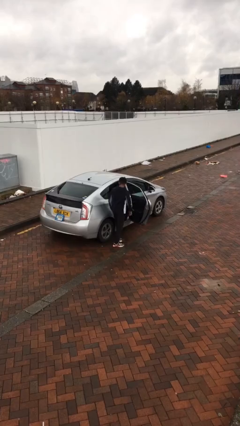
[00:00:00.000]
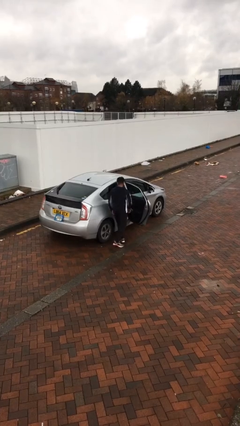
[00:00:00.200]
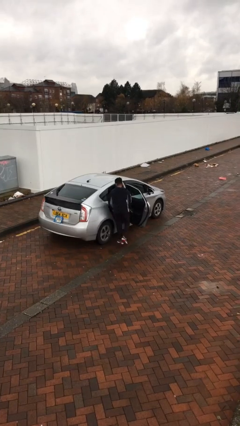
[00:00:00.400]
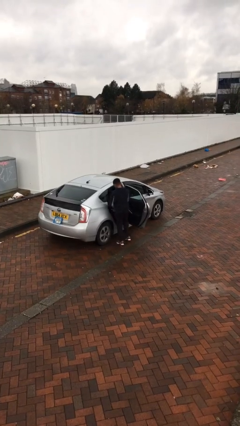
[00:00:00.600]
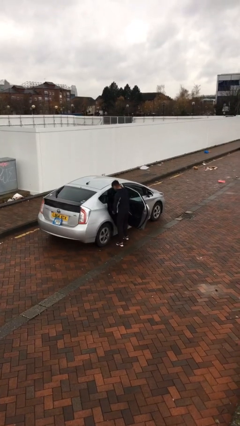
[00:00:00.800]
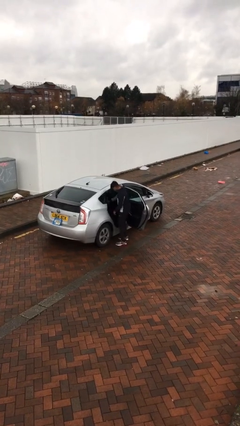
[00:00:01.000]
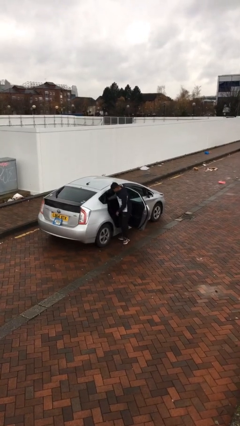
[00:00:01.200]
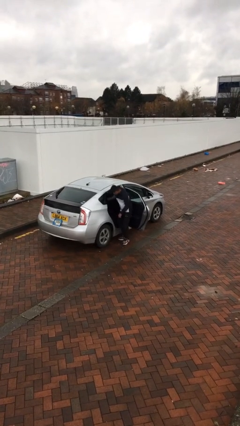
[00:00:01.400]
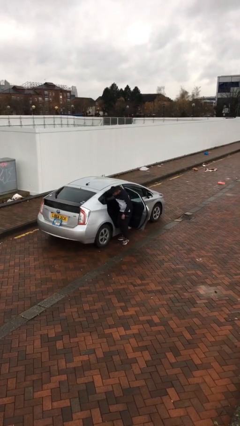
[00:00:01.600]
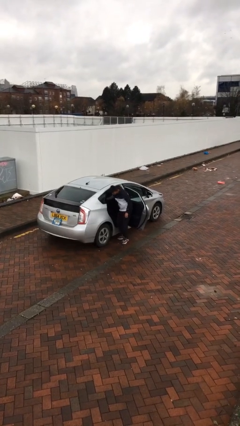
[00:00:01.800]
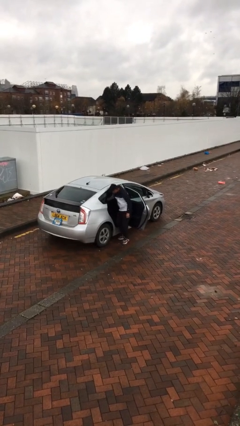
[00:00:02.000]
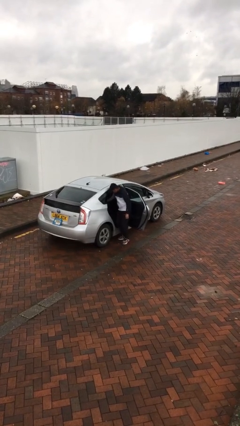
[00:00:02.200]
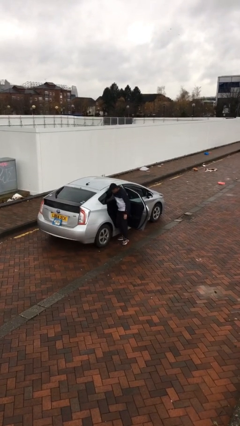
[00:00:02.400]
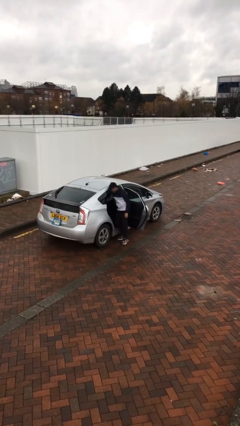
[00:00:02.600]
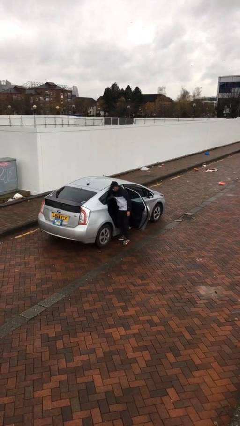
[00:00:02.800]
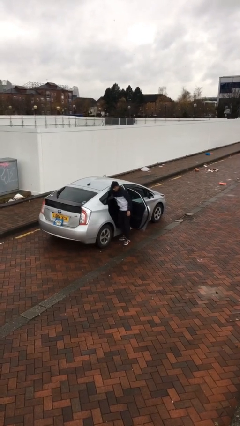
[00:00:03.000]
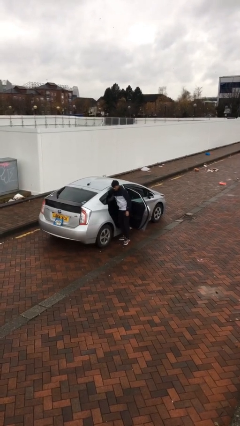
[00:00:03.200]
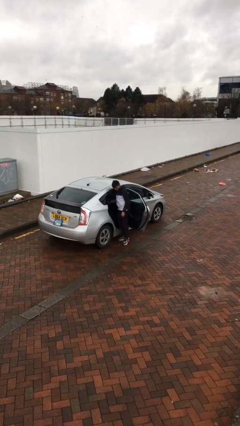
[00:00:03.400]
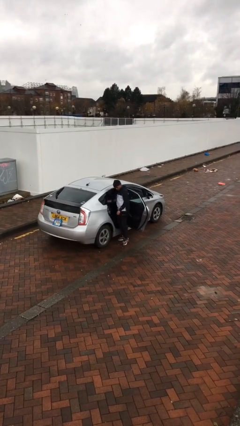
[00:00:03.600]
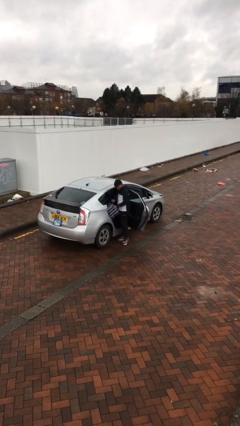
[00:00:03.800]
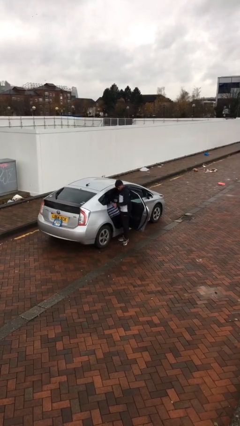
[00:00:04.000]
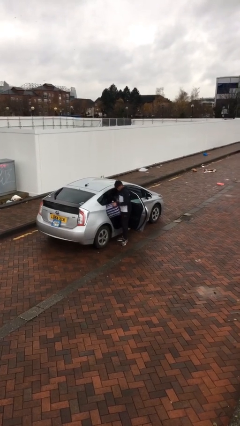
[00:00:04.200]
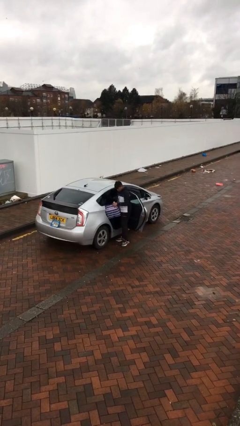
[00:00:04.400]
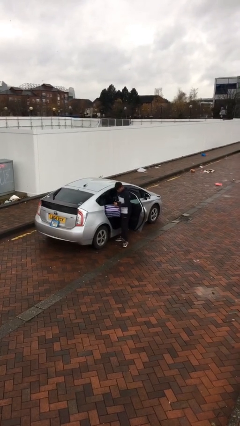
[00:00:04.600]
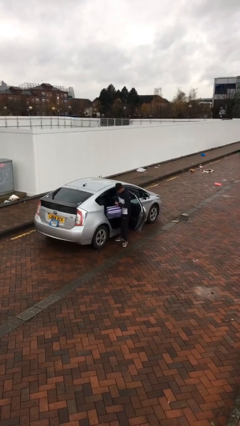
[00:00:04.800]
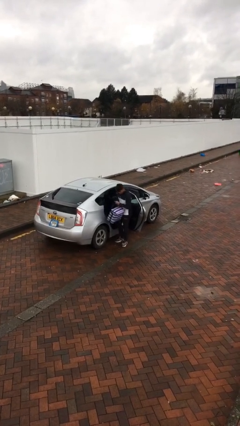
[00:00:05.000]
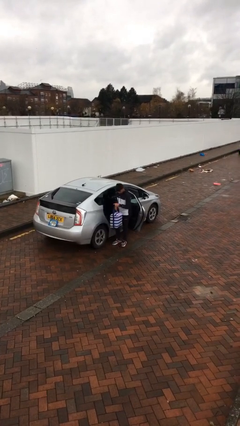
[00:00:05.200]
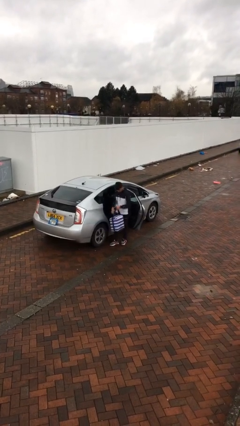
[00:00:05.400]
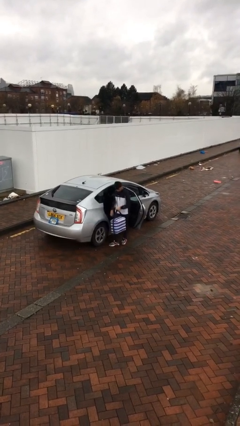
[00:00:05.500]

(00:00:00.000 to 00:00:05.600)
person unloads car

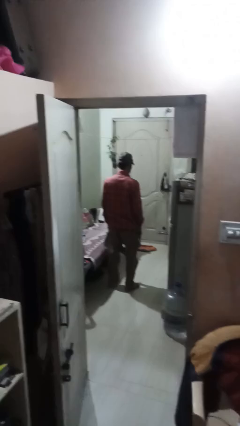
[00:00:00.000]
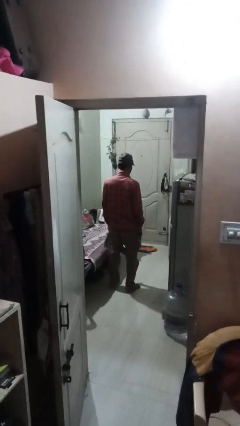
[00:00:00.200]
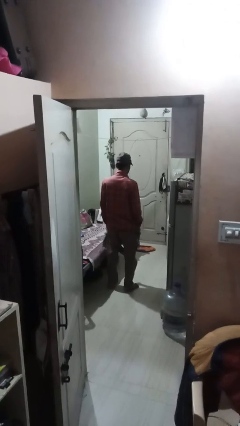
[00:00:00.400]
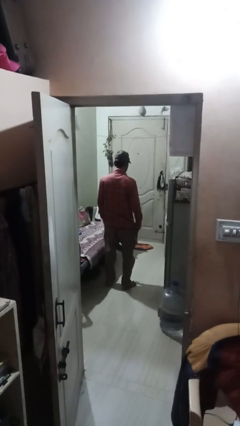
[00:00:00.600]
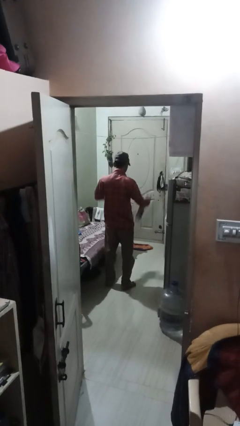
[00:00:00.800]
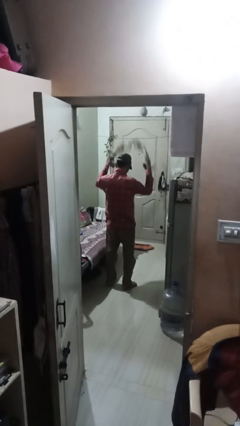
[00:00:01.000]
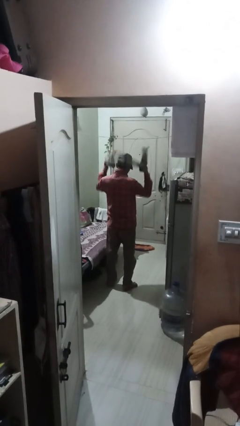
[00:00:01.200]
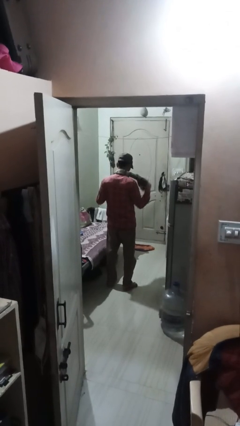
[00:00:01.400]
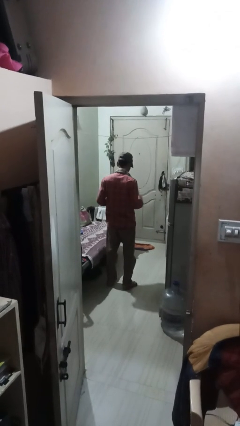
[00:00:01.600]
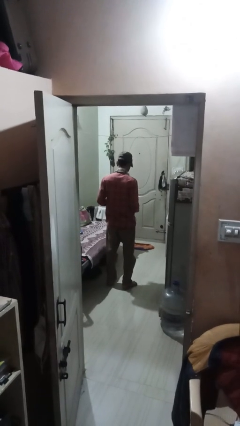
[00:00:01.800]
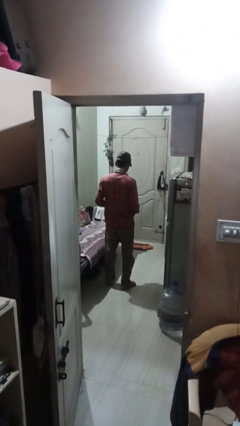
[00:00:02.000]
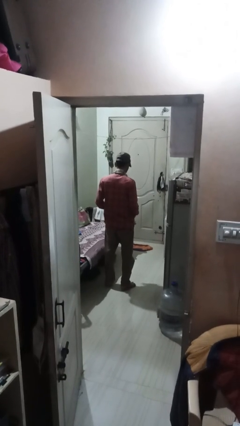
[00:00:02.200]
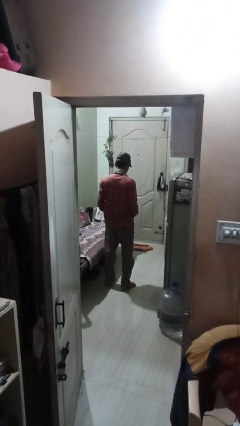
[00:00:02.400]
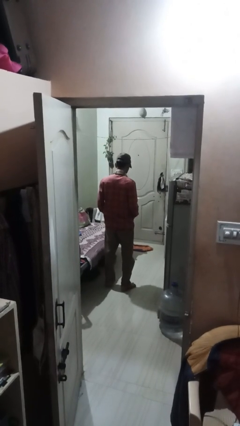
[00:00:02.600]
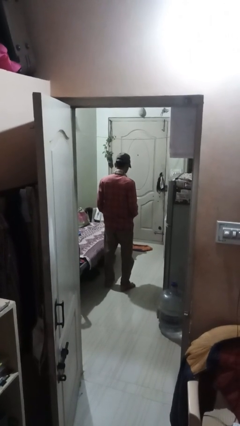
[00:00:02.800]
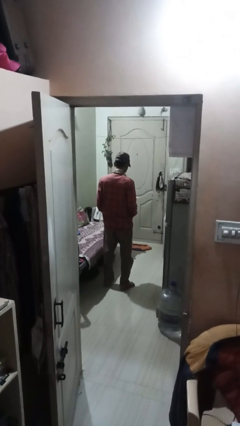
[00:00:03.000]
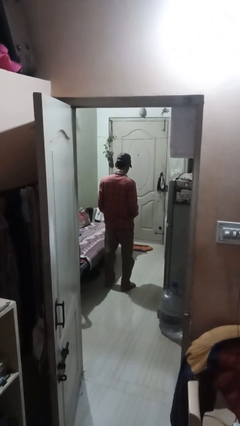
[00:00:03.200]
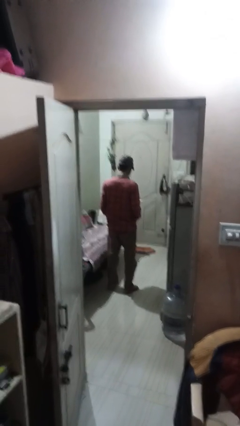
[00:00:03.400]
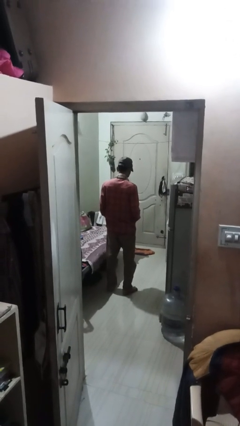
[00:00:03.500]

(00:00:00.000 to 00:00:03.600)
person puts on scarf

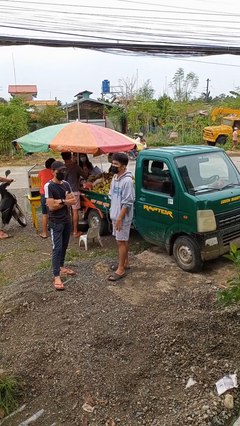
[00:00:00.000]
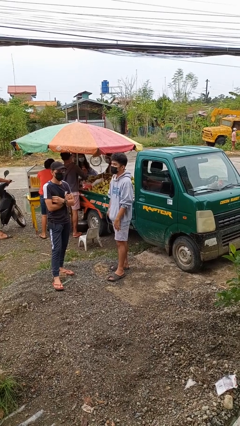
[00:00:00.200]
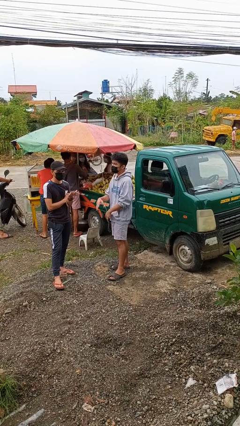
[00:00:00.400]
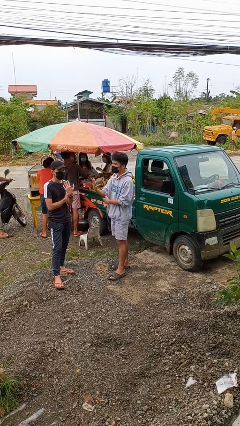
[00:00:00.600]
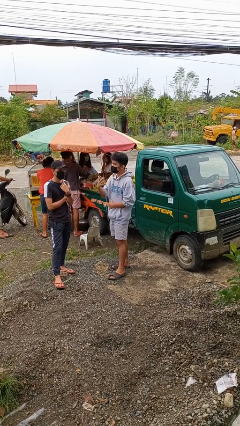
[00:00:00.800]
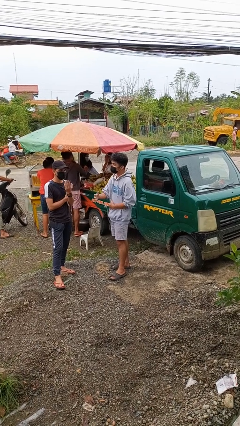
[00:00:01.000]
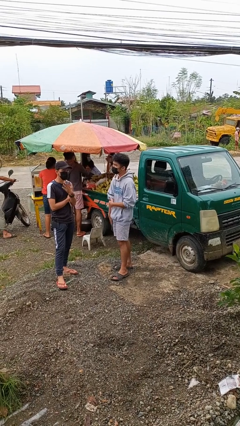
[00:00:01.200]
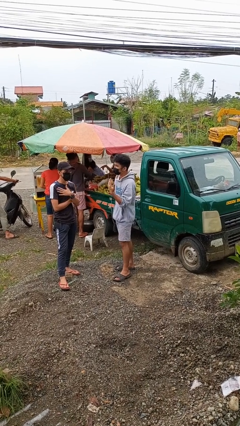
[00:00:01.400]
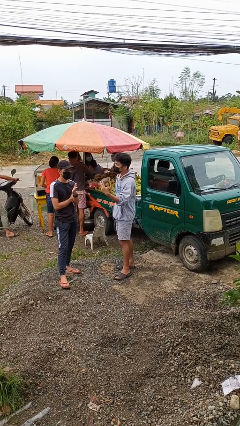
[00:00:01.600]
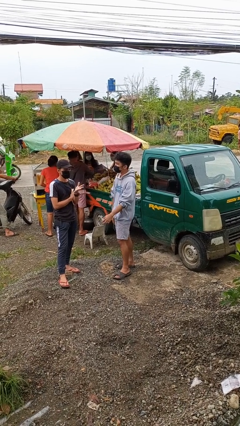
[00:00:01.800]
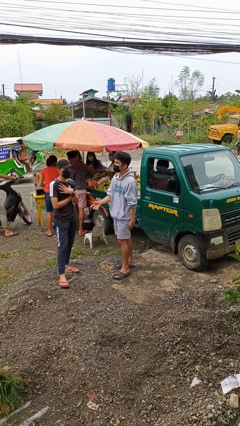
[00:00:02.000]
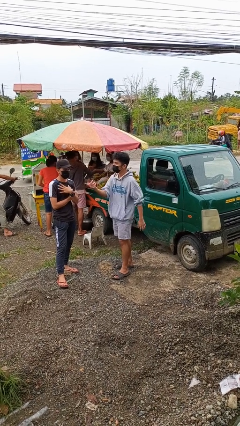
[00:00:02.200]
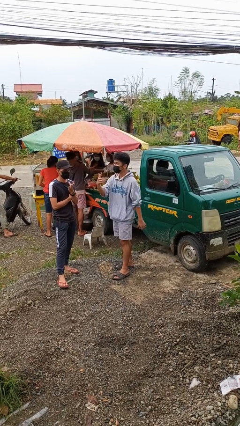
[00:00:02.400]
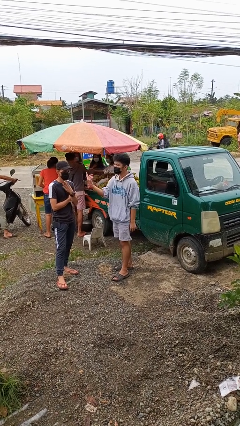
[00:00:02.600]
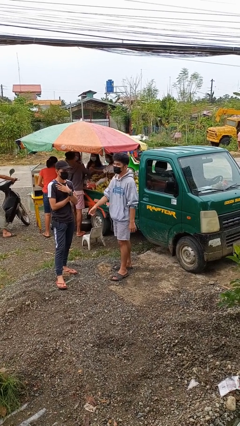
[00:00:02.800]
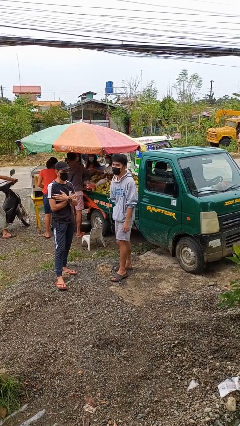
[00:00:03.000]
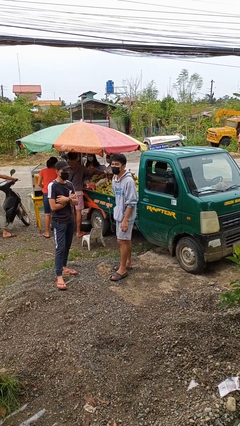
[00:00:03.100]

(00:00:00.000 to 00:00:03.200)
person talks to person

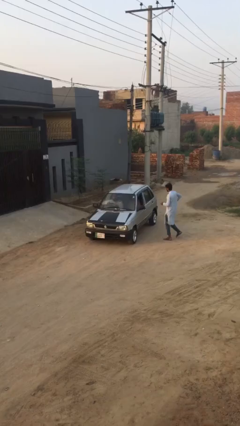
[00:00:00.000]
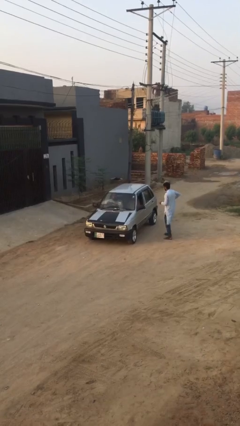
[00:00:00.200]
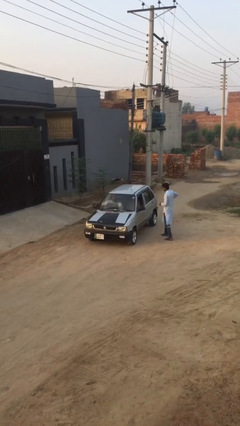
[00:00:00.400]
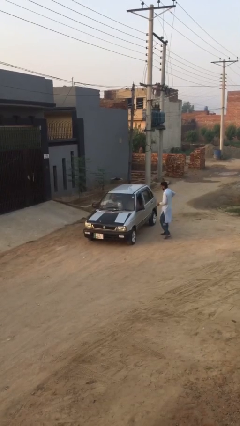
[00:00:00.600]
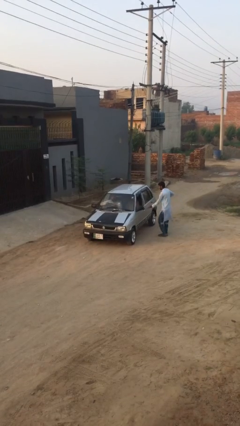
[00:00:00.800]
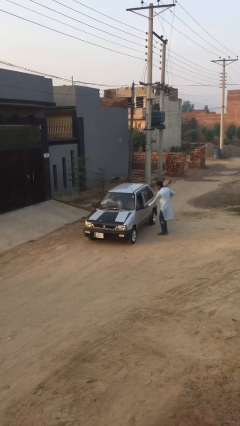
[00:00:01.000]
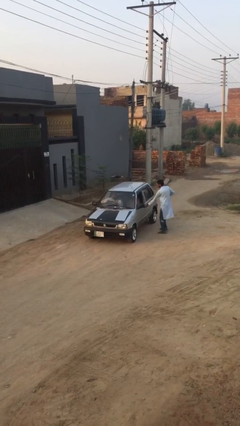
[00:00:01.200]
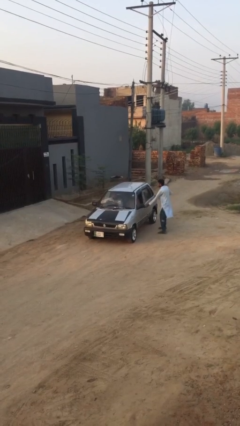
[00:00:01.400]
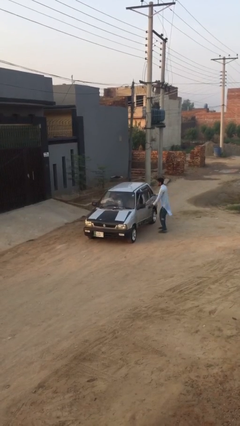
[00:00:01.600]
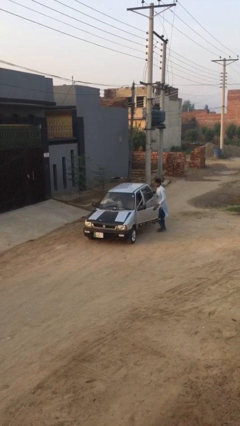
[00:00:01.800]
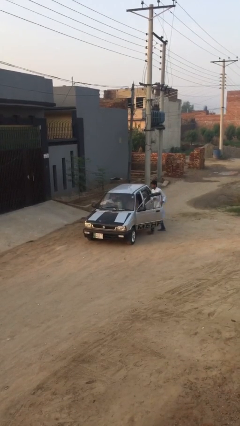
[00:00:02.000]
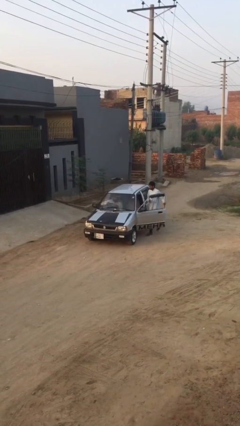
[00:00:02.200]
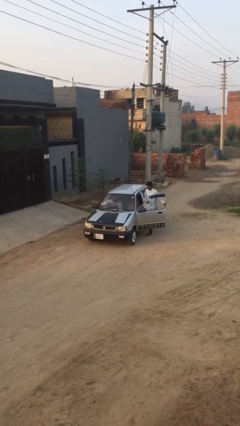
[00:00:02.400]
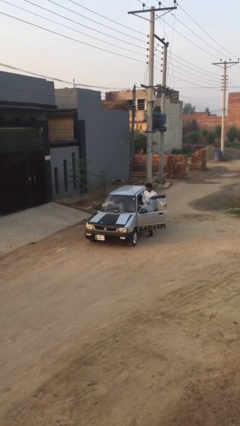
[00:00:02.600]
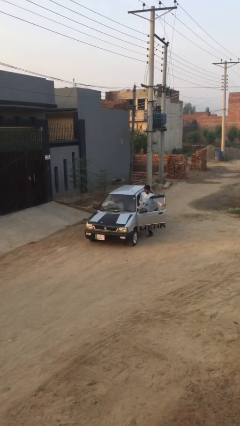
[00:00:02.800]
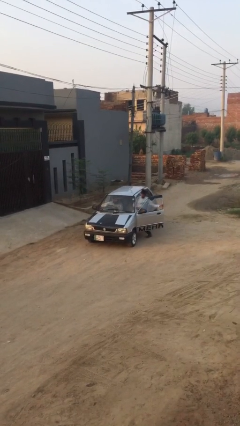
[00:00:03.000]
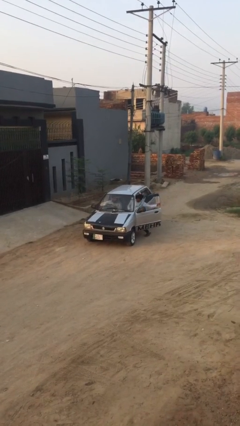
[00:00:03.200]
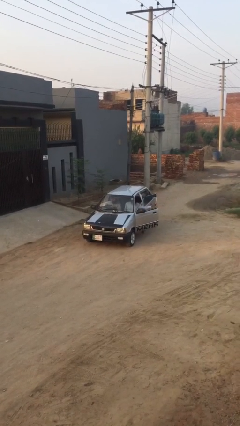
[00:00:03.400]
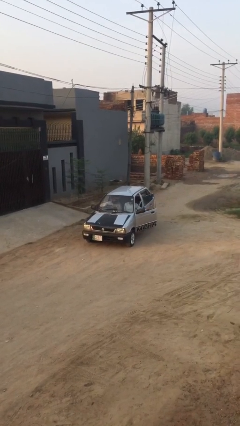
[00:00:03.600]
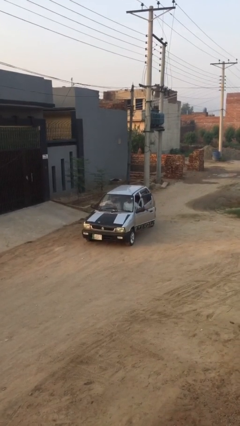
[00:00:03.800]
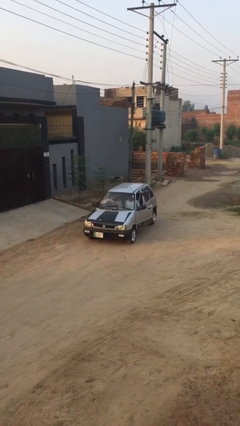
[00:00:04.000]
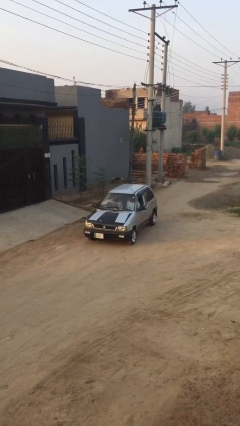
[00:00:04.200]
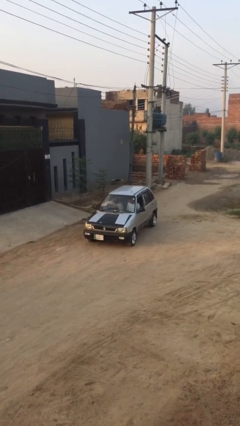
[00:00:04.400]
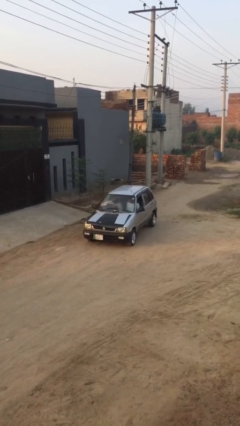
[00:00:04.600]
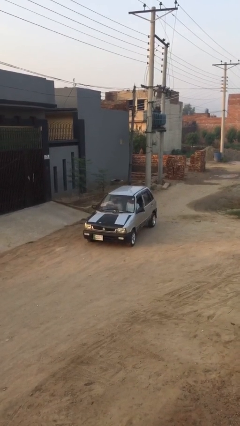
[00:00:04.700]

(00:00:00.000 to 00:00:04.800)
car picks up person
